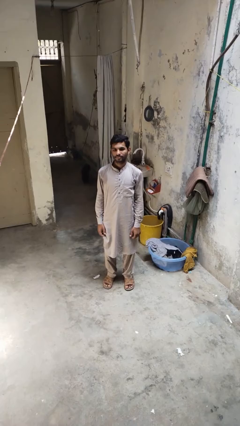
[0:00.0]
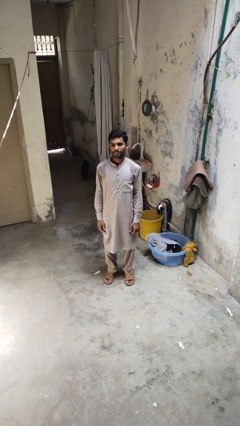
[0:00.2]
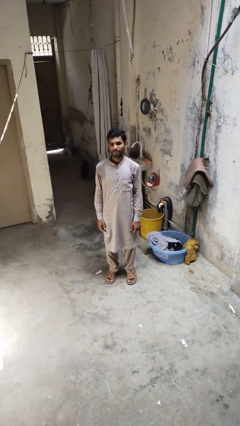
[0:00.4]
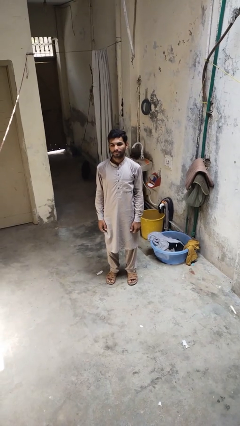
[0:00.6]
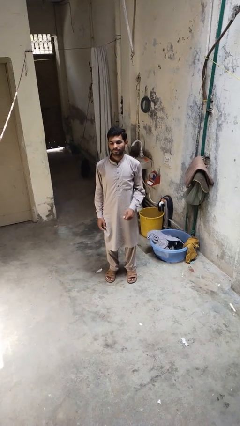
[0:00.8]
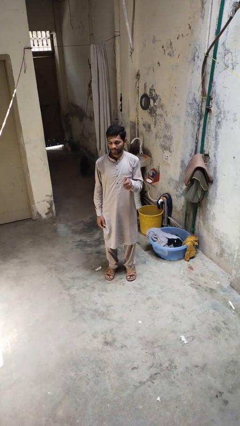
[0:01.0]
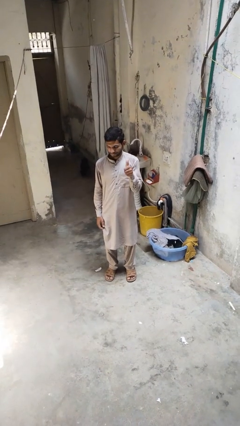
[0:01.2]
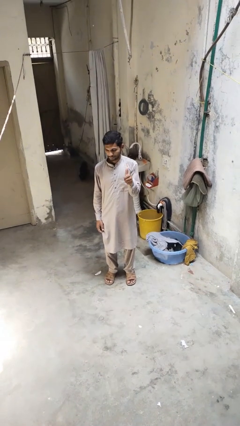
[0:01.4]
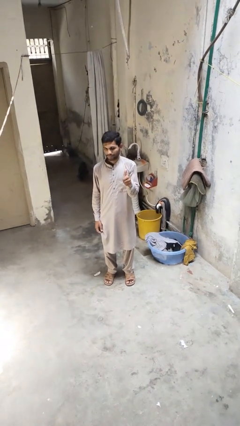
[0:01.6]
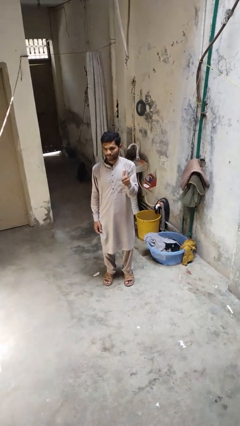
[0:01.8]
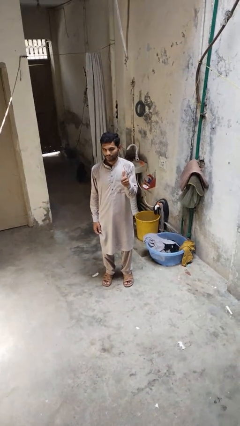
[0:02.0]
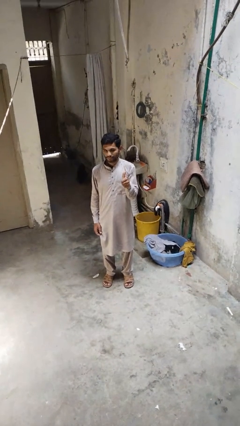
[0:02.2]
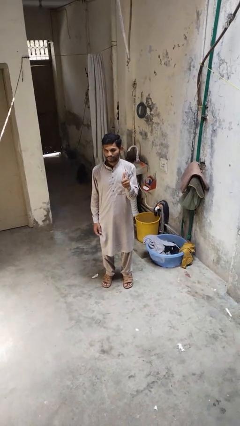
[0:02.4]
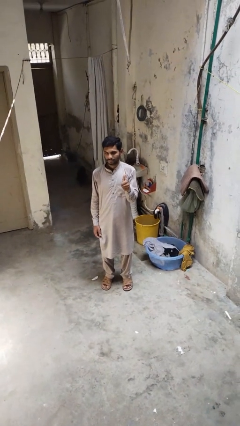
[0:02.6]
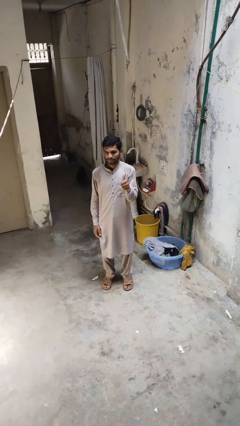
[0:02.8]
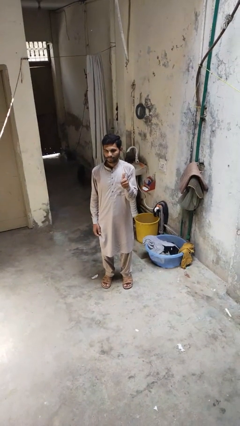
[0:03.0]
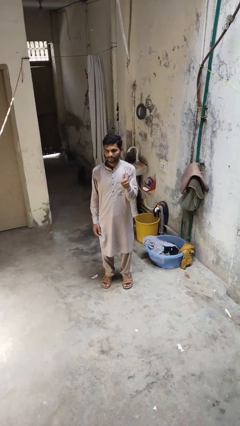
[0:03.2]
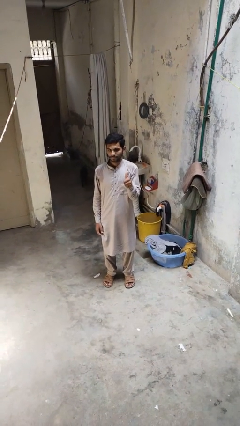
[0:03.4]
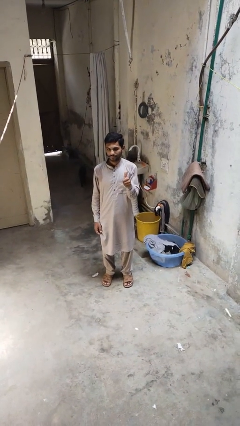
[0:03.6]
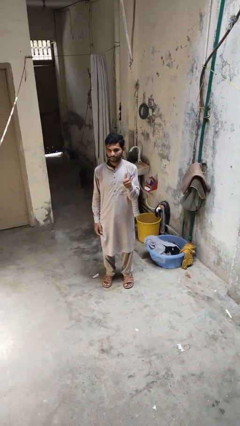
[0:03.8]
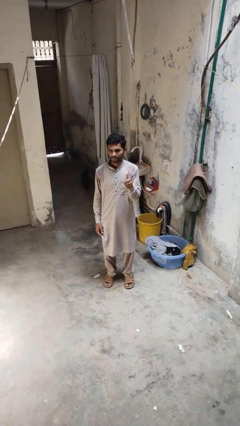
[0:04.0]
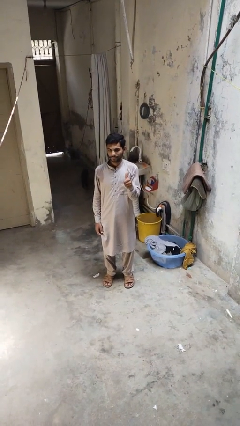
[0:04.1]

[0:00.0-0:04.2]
person gestures thumbs up

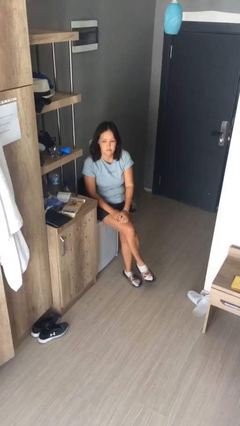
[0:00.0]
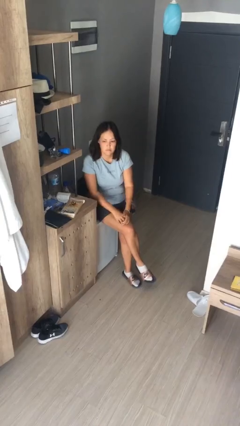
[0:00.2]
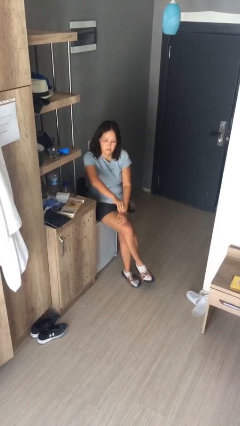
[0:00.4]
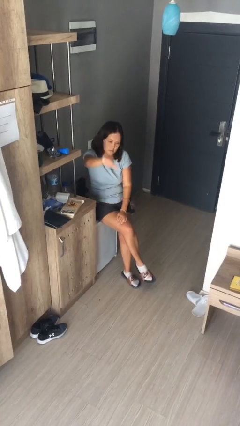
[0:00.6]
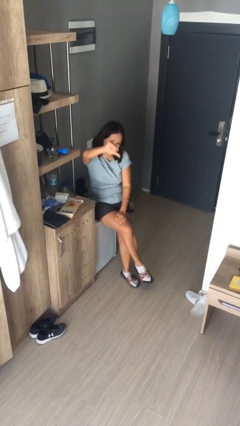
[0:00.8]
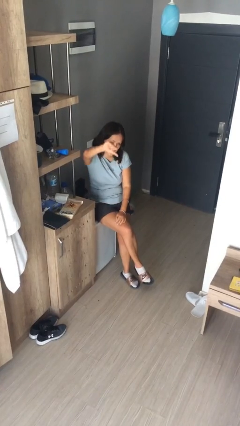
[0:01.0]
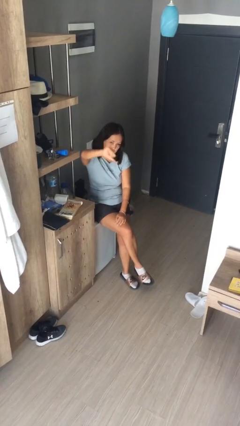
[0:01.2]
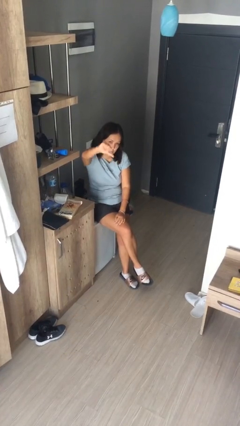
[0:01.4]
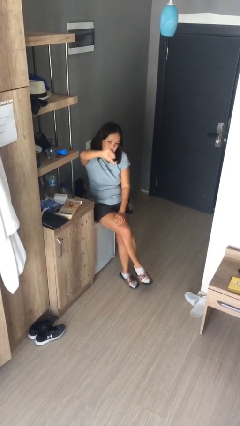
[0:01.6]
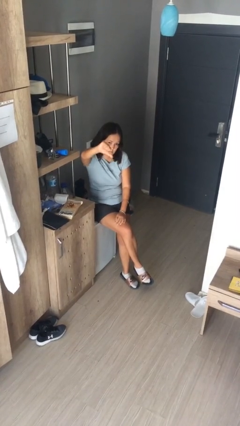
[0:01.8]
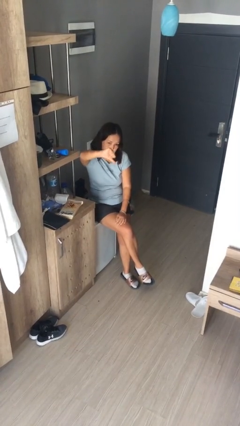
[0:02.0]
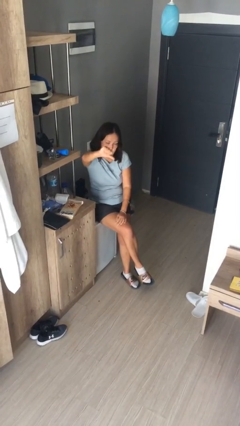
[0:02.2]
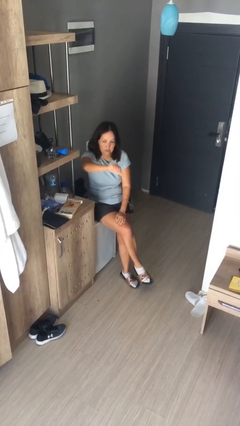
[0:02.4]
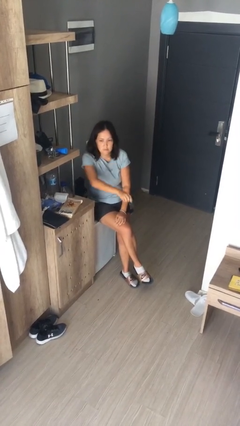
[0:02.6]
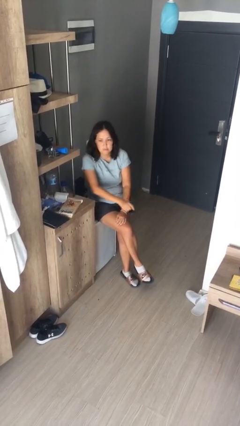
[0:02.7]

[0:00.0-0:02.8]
person gestures thumbs down

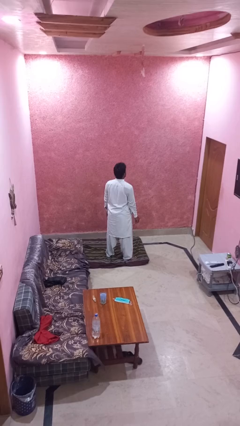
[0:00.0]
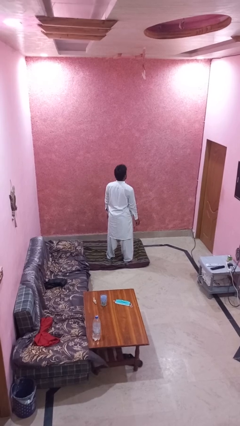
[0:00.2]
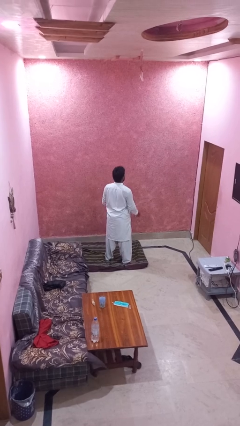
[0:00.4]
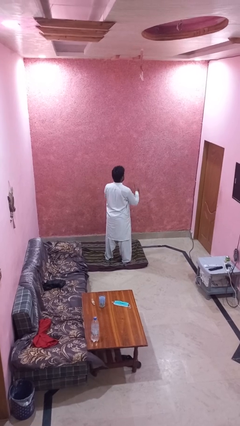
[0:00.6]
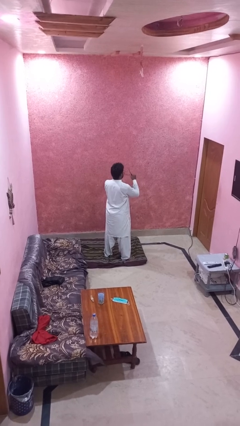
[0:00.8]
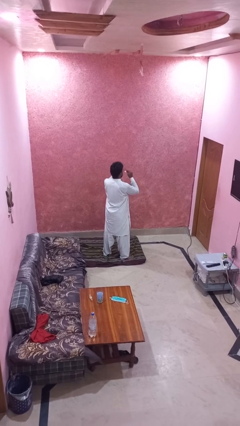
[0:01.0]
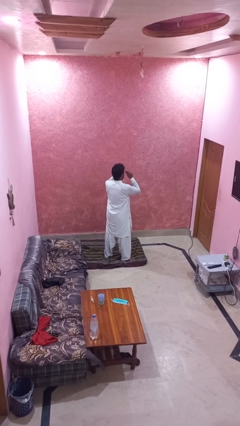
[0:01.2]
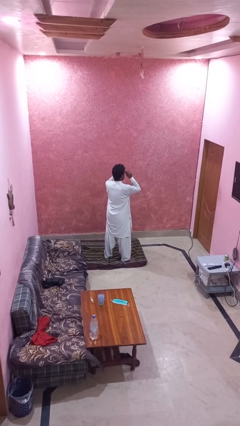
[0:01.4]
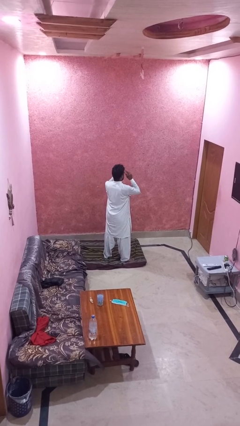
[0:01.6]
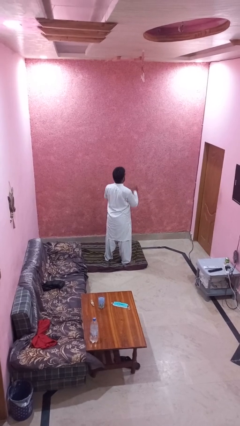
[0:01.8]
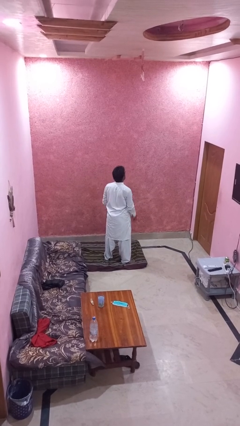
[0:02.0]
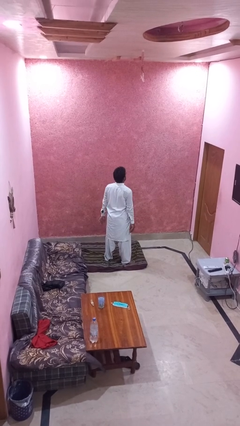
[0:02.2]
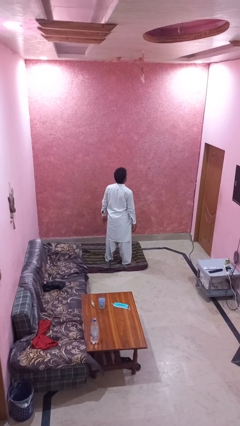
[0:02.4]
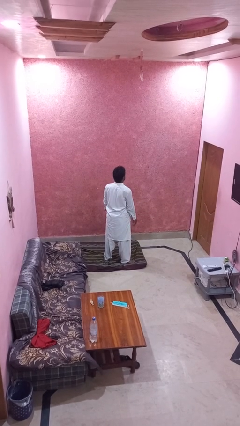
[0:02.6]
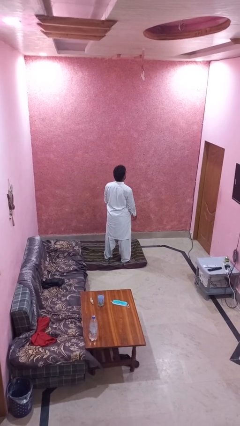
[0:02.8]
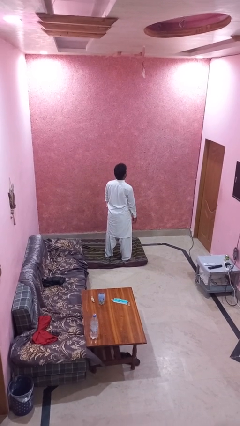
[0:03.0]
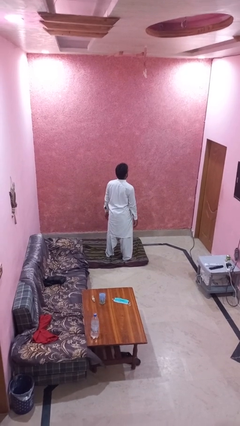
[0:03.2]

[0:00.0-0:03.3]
person puts on glasses

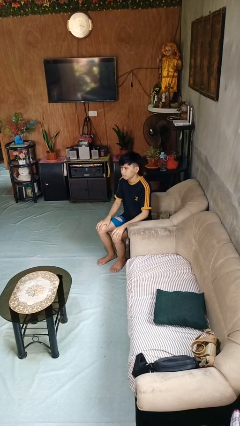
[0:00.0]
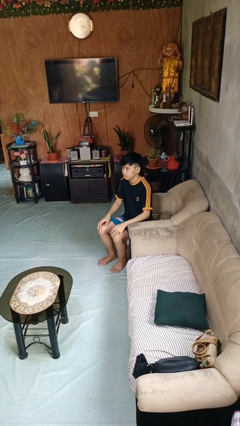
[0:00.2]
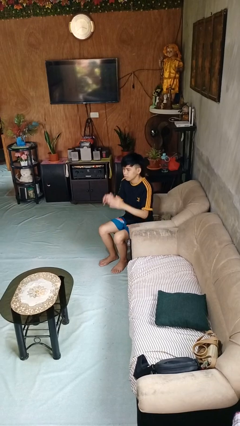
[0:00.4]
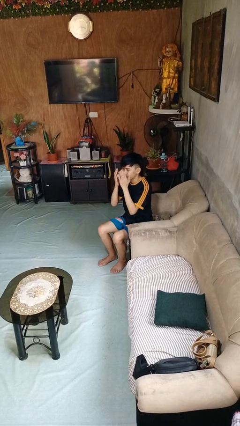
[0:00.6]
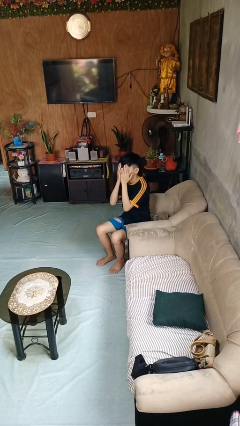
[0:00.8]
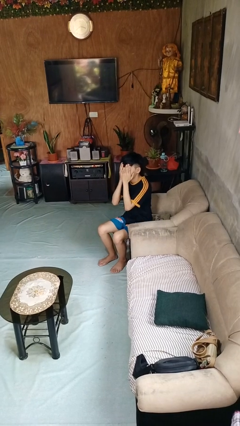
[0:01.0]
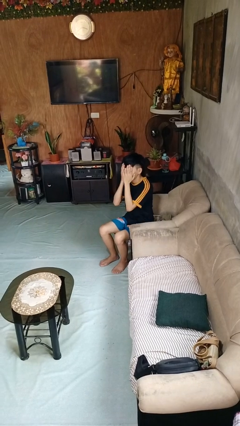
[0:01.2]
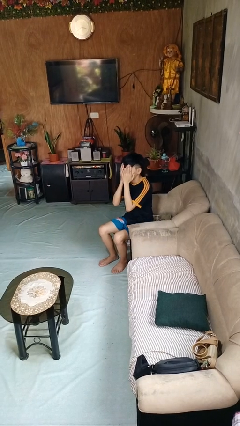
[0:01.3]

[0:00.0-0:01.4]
person covers face with hands

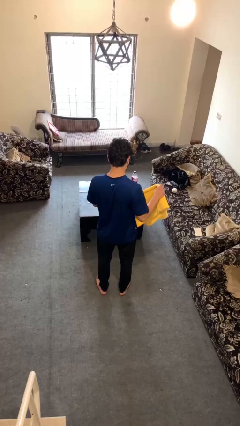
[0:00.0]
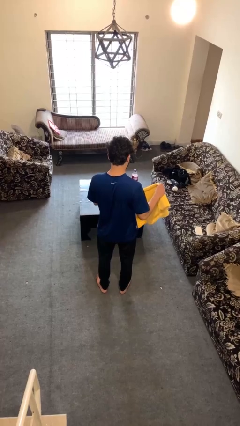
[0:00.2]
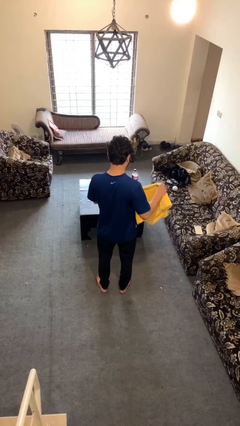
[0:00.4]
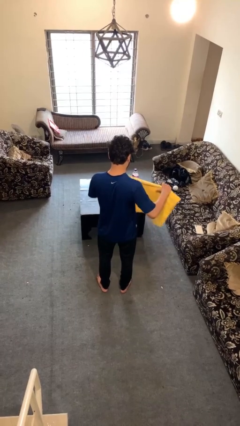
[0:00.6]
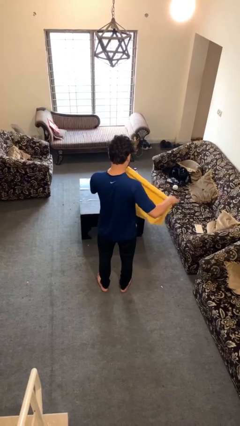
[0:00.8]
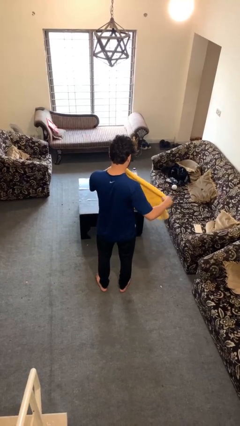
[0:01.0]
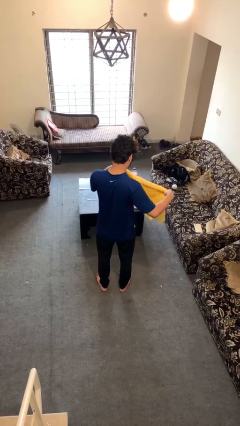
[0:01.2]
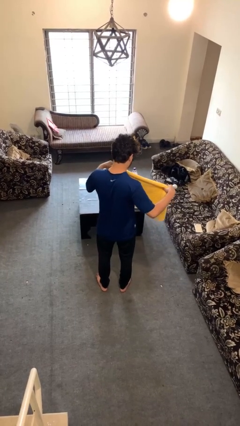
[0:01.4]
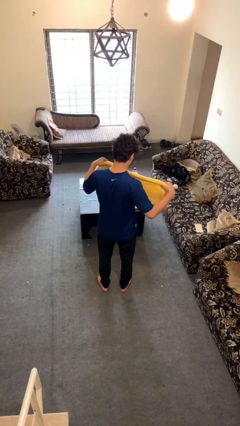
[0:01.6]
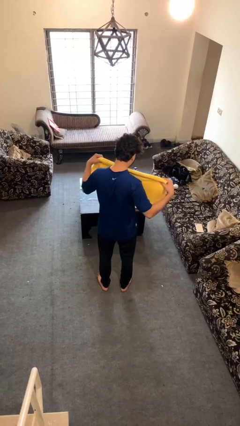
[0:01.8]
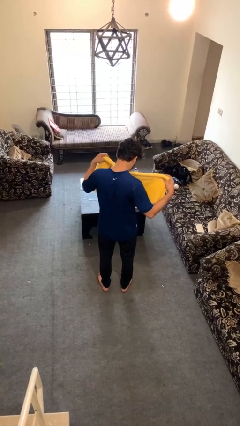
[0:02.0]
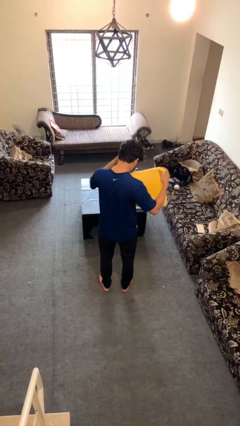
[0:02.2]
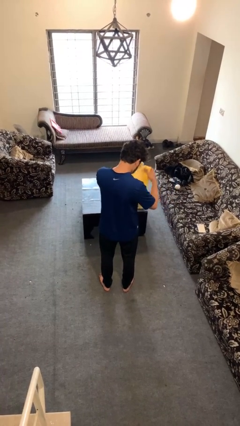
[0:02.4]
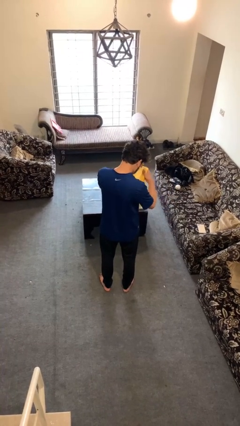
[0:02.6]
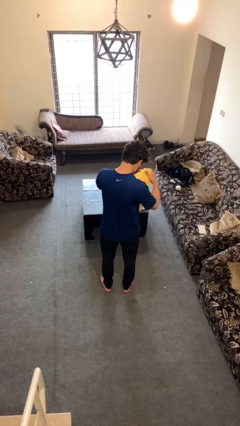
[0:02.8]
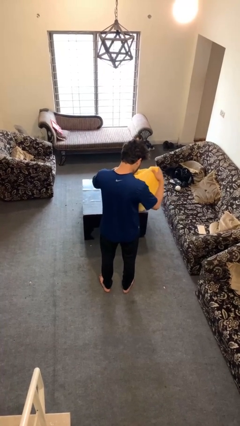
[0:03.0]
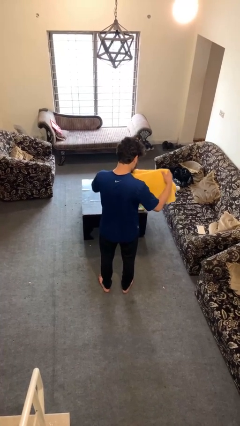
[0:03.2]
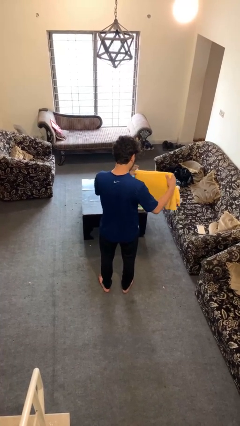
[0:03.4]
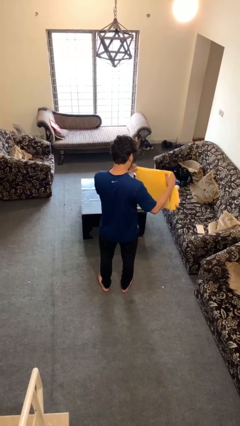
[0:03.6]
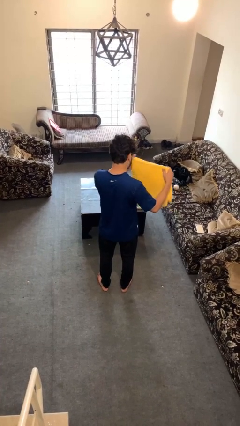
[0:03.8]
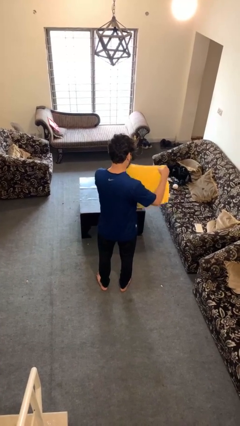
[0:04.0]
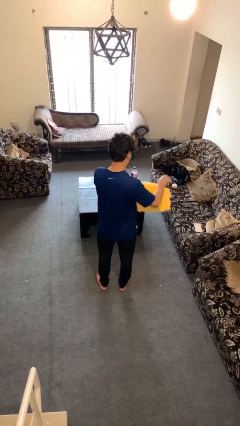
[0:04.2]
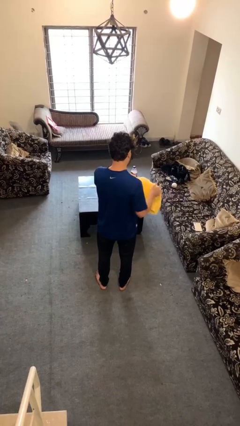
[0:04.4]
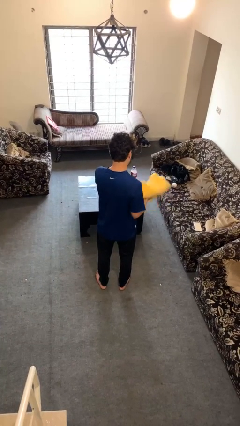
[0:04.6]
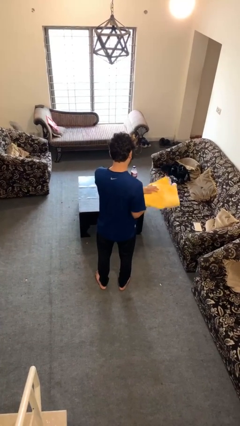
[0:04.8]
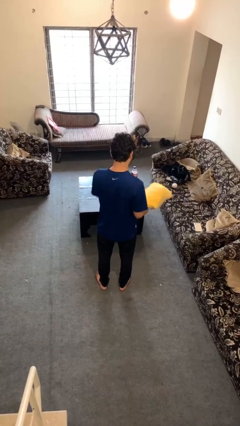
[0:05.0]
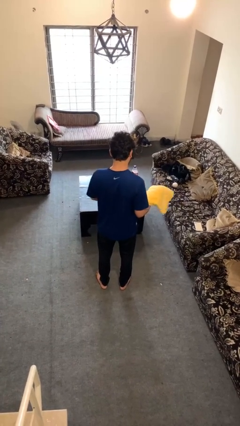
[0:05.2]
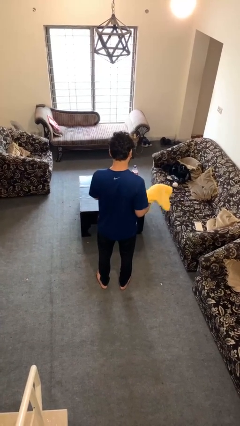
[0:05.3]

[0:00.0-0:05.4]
person folds towel

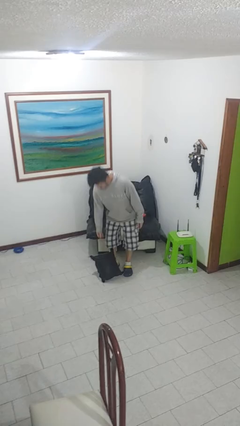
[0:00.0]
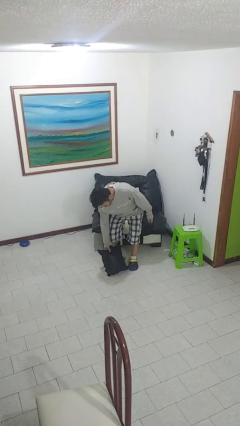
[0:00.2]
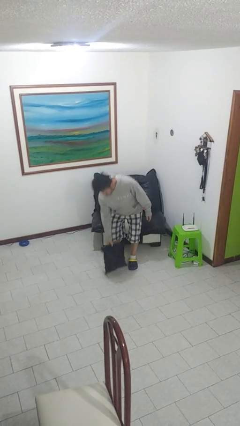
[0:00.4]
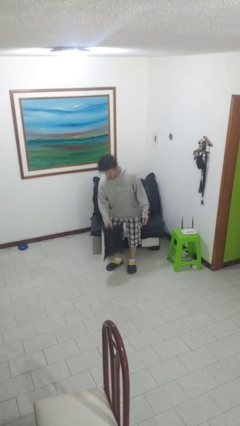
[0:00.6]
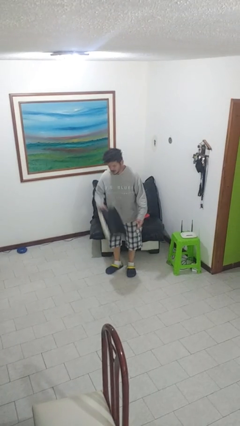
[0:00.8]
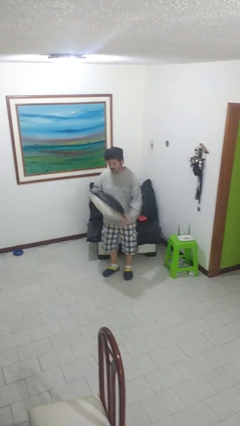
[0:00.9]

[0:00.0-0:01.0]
person picks up object from floor
